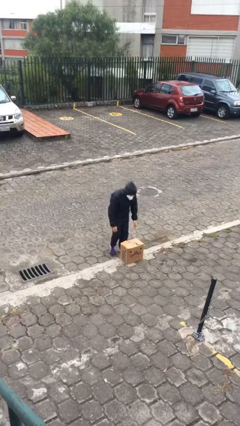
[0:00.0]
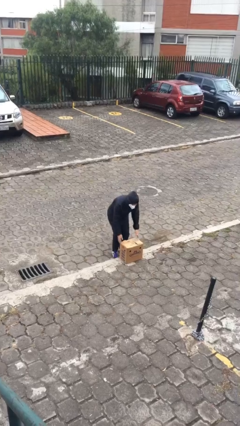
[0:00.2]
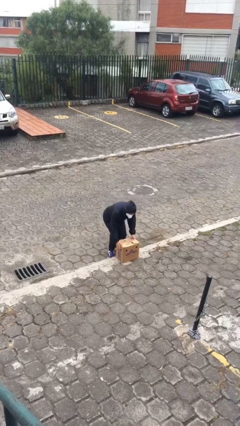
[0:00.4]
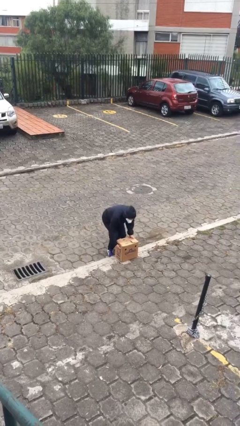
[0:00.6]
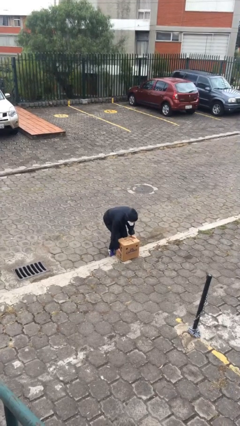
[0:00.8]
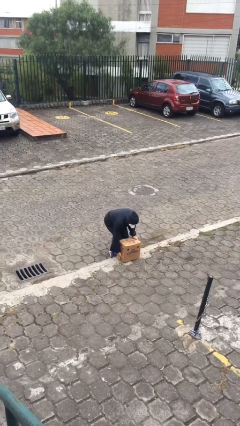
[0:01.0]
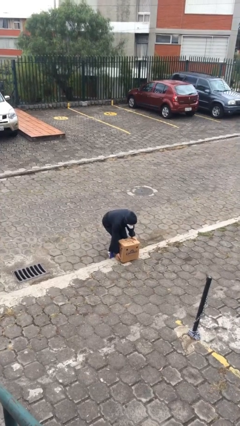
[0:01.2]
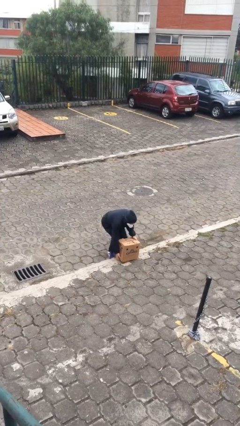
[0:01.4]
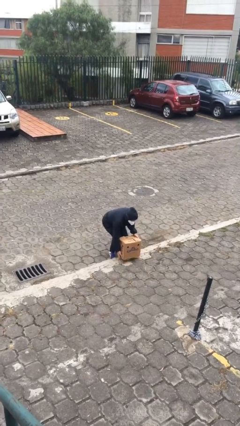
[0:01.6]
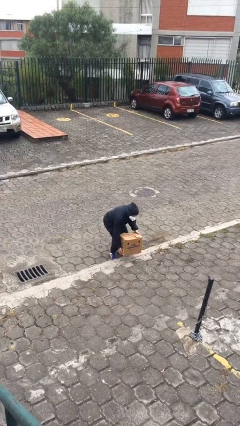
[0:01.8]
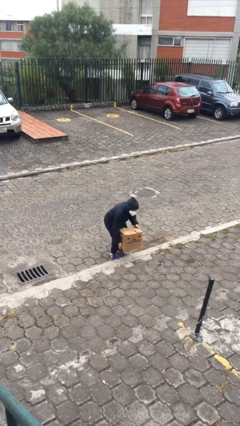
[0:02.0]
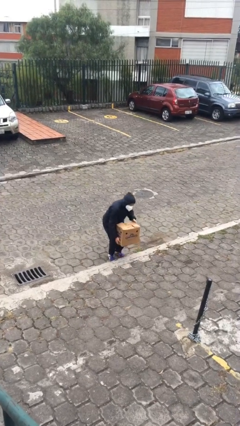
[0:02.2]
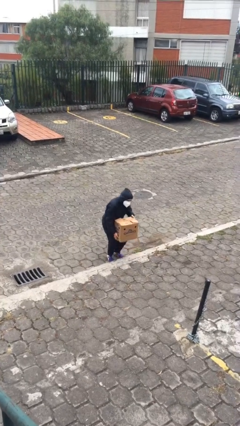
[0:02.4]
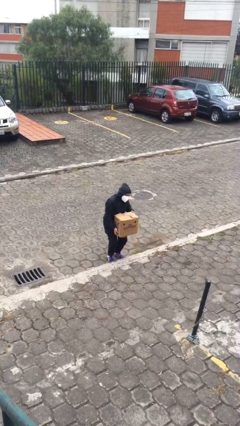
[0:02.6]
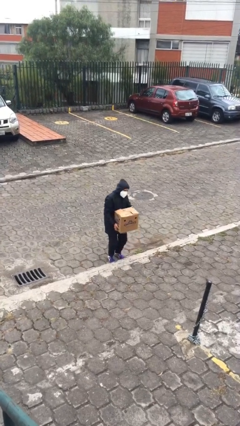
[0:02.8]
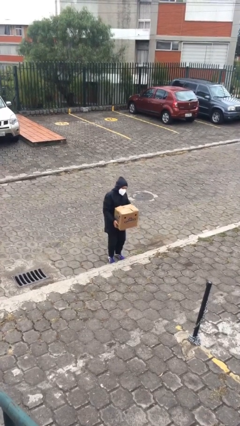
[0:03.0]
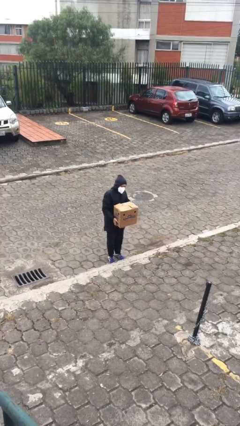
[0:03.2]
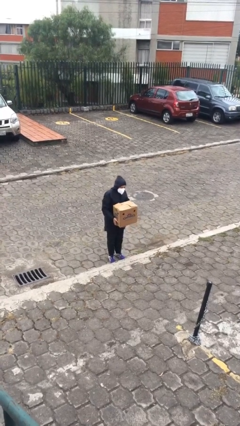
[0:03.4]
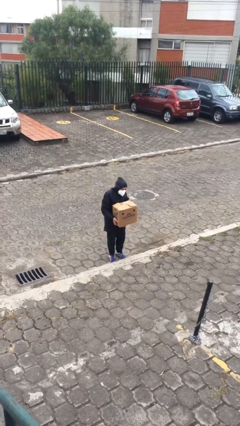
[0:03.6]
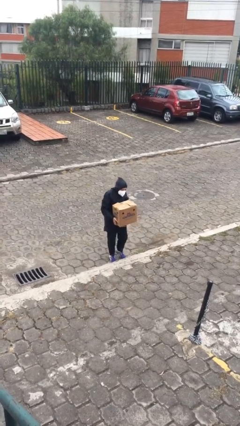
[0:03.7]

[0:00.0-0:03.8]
person picks up object from floor

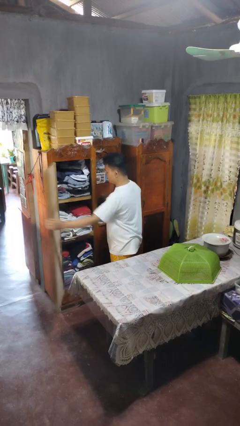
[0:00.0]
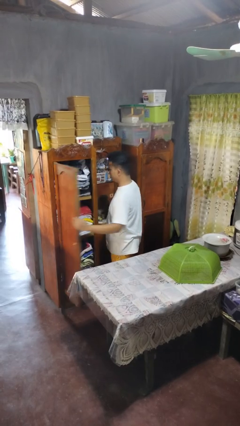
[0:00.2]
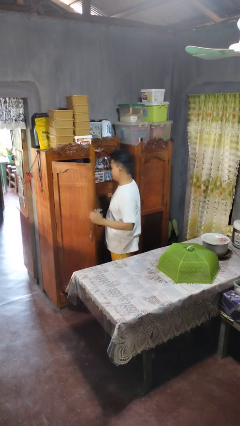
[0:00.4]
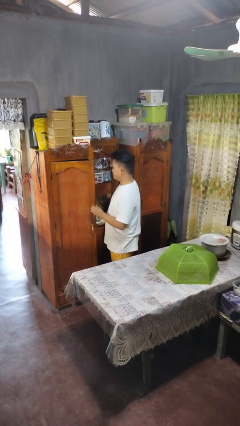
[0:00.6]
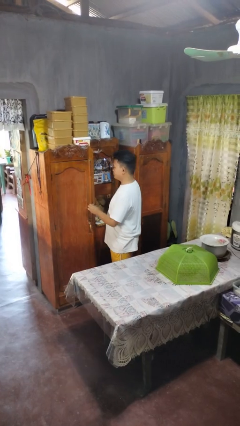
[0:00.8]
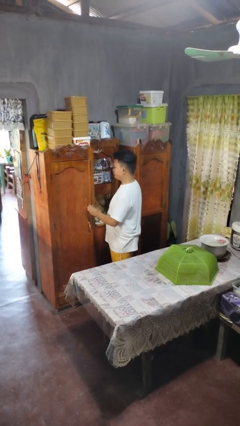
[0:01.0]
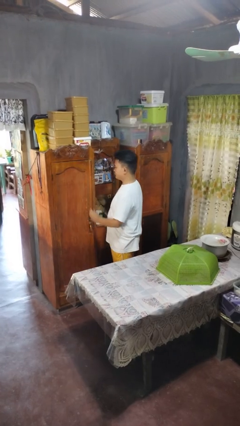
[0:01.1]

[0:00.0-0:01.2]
person closes closet door

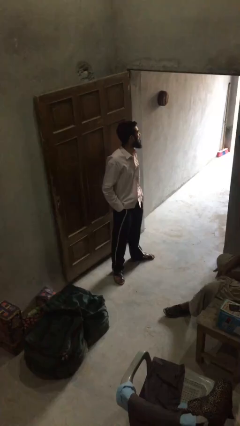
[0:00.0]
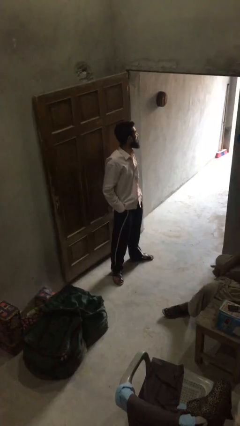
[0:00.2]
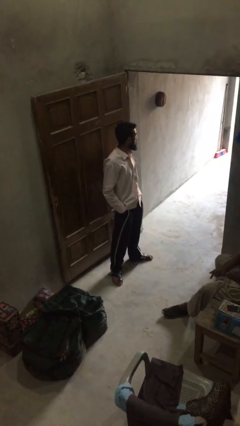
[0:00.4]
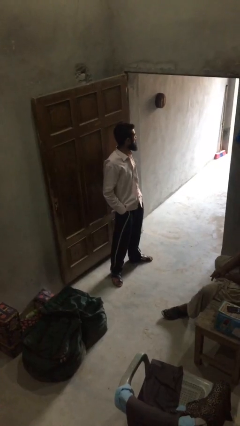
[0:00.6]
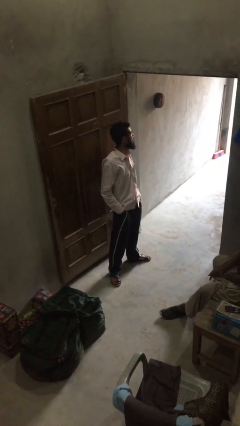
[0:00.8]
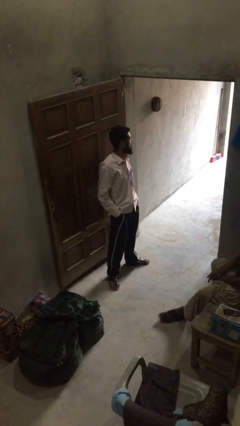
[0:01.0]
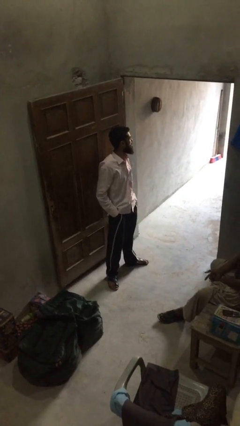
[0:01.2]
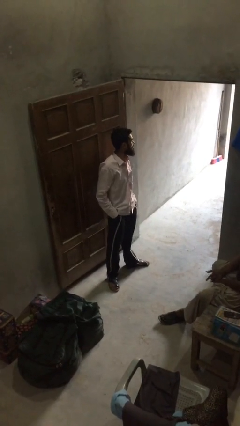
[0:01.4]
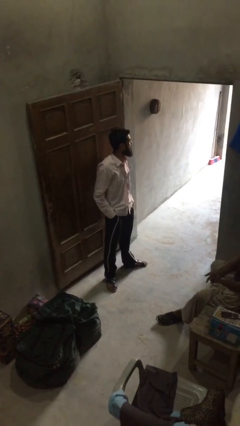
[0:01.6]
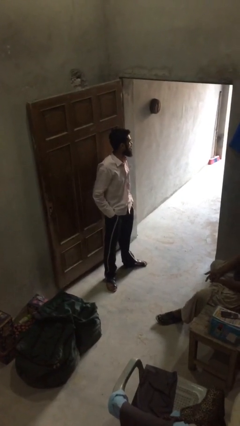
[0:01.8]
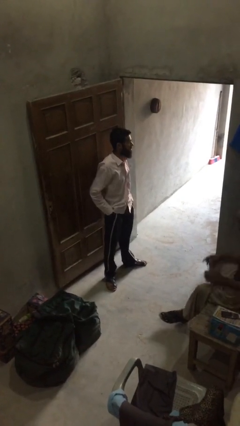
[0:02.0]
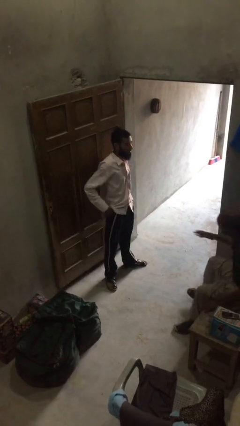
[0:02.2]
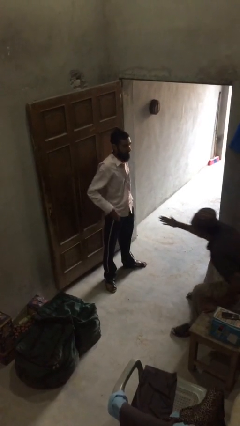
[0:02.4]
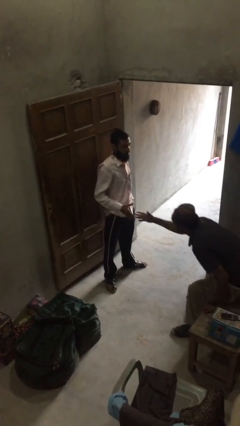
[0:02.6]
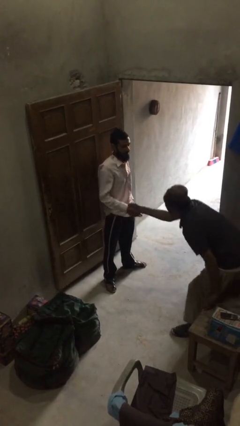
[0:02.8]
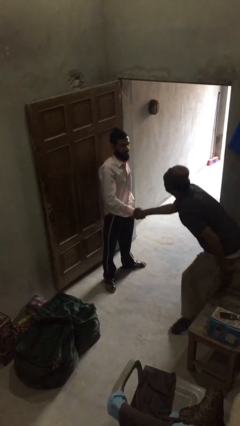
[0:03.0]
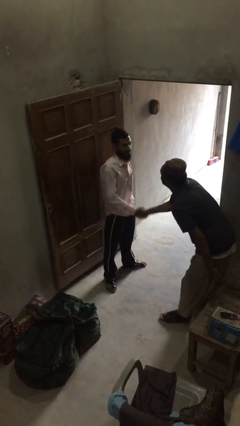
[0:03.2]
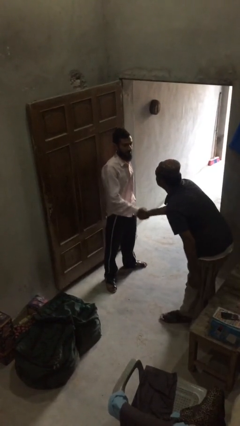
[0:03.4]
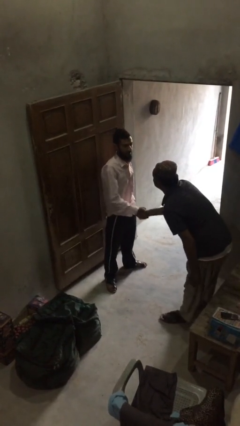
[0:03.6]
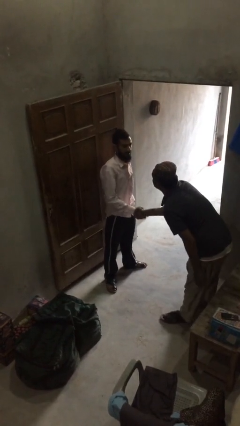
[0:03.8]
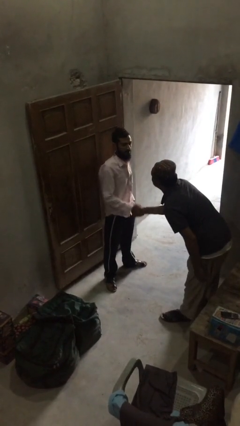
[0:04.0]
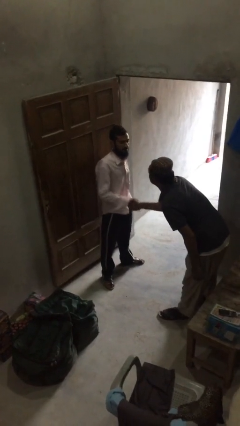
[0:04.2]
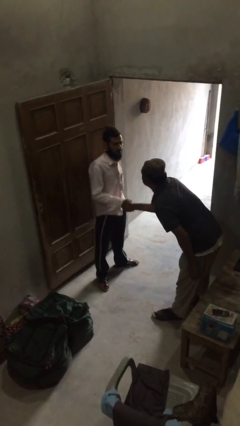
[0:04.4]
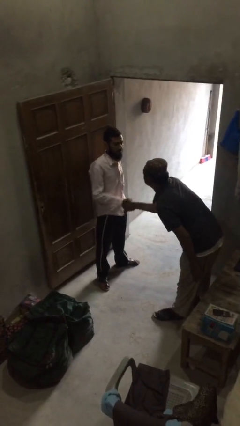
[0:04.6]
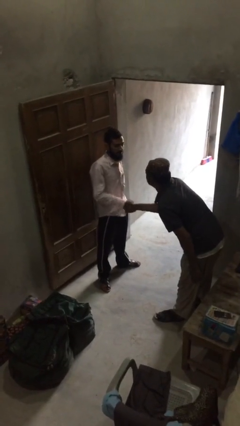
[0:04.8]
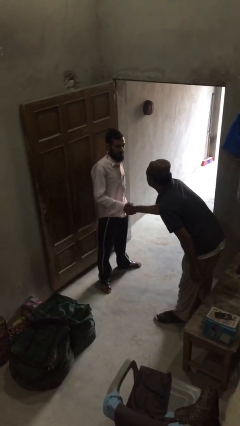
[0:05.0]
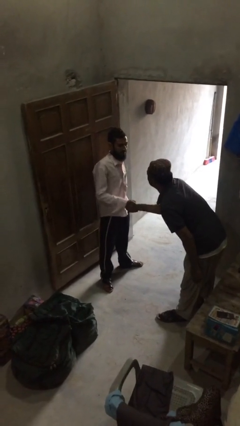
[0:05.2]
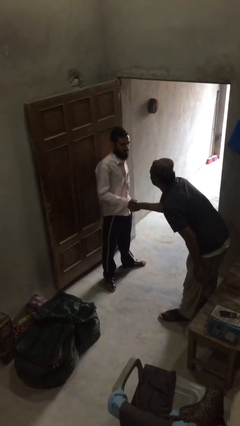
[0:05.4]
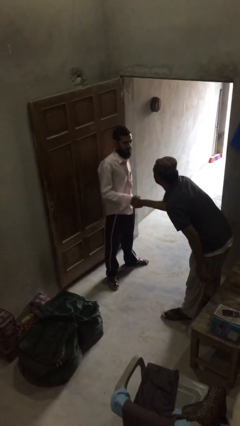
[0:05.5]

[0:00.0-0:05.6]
person shakes hand

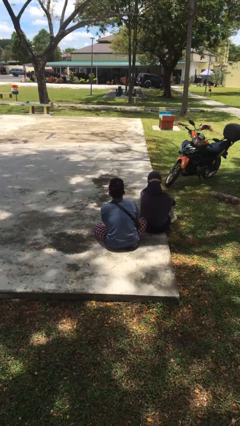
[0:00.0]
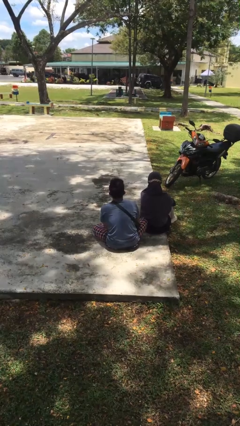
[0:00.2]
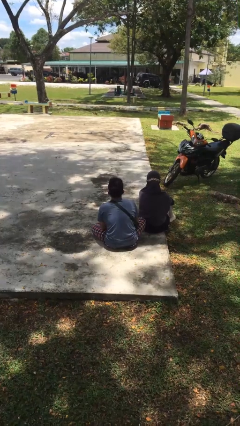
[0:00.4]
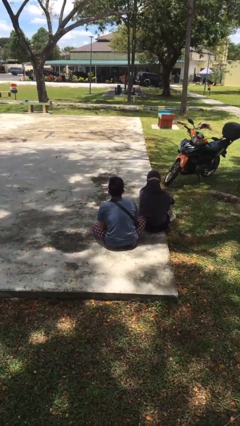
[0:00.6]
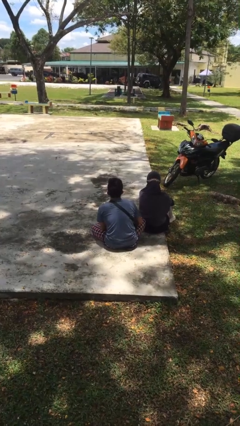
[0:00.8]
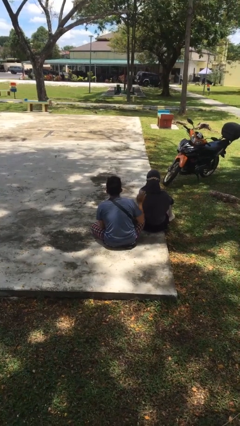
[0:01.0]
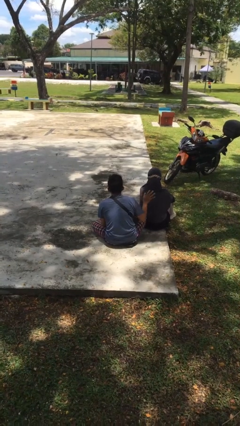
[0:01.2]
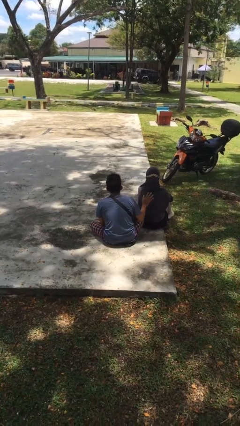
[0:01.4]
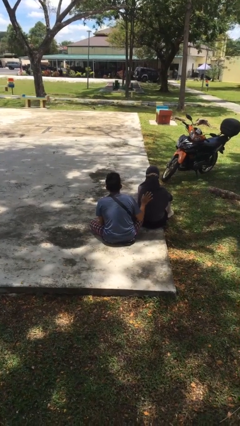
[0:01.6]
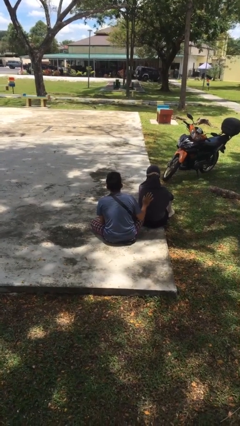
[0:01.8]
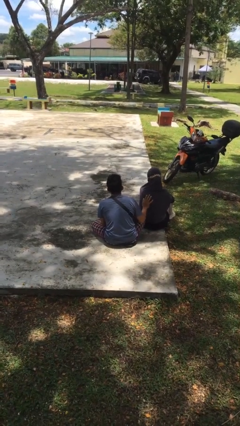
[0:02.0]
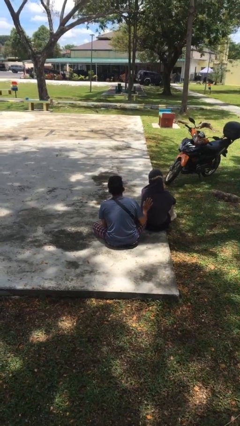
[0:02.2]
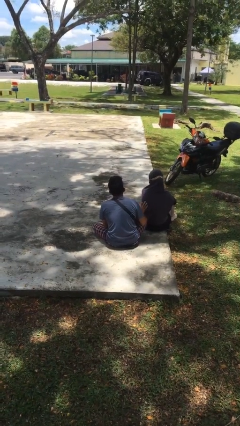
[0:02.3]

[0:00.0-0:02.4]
person touches back of person

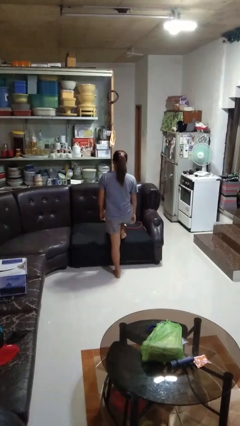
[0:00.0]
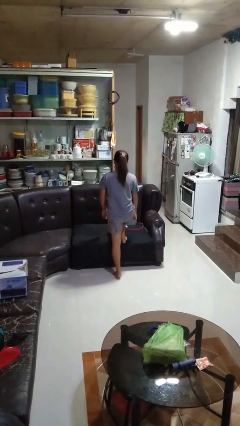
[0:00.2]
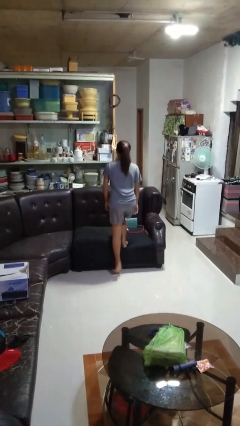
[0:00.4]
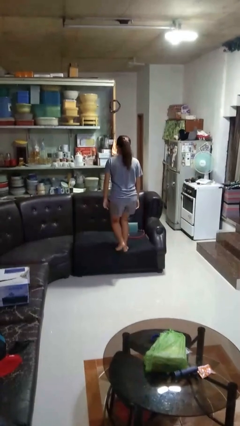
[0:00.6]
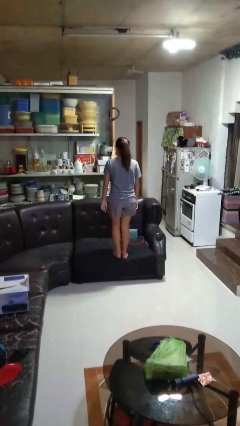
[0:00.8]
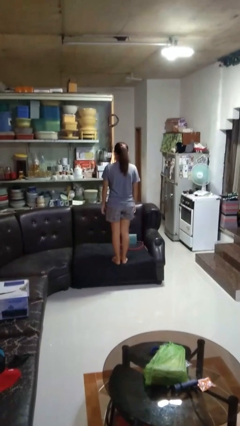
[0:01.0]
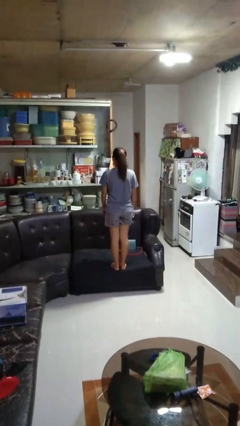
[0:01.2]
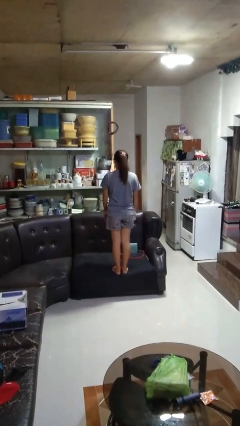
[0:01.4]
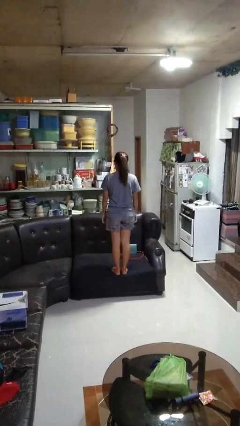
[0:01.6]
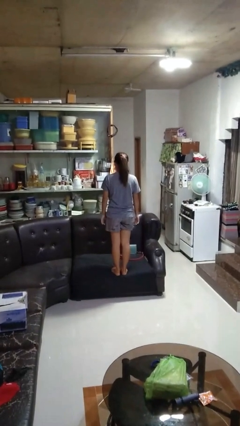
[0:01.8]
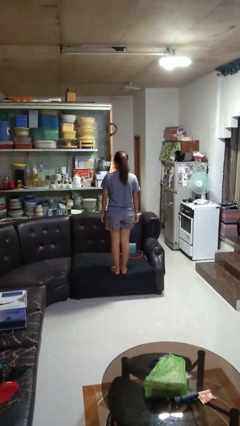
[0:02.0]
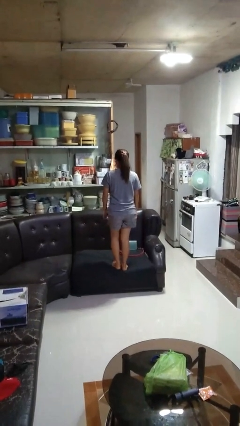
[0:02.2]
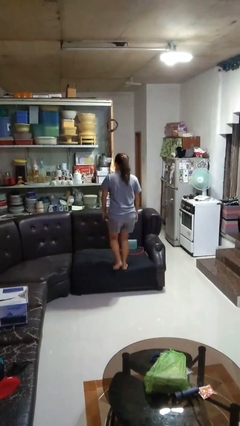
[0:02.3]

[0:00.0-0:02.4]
person climbs on couch

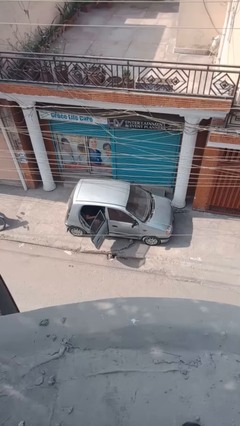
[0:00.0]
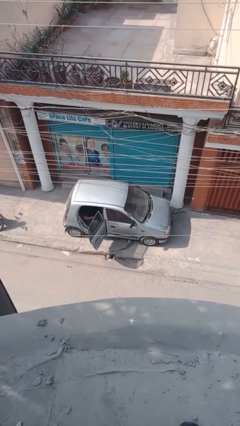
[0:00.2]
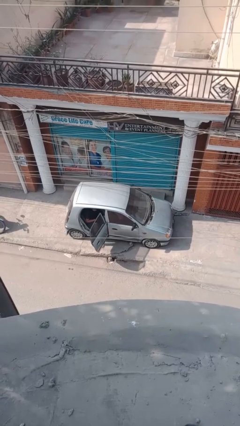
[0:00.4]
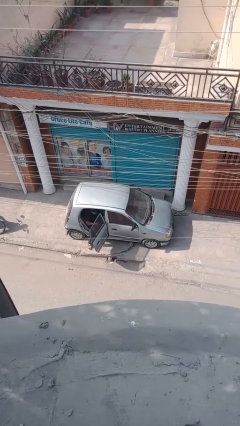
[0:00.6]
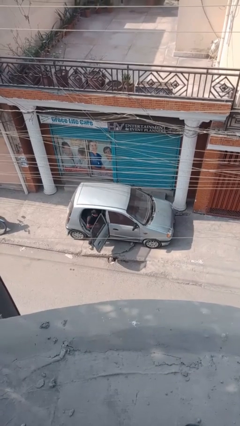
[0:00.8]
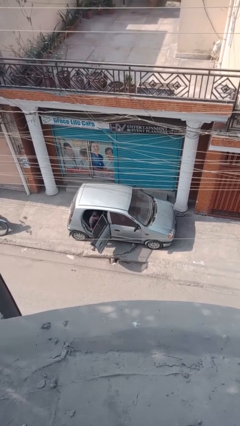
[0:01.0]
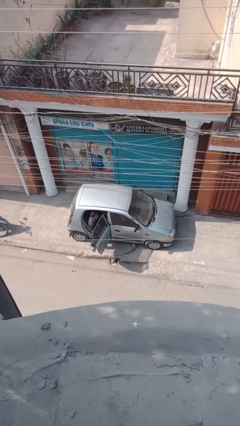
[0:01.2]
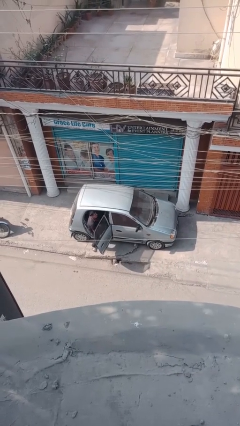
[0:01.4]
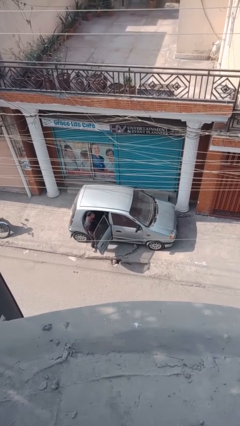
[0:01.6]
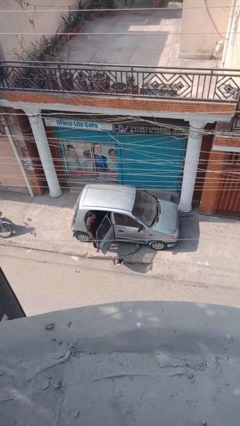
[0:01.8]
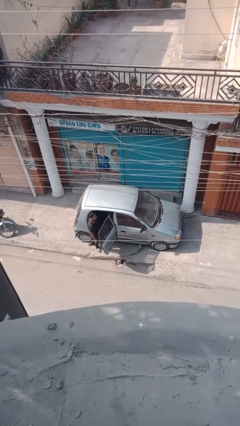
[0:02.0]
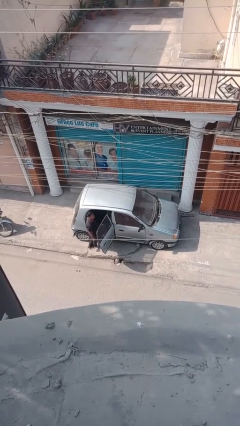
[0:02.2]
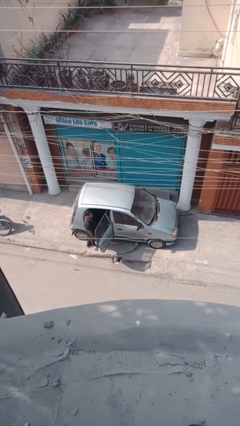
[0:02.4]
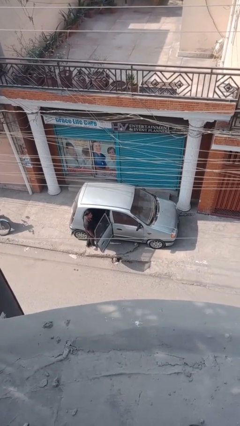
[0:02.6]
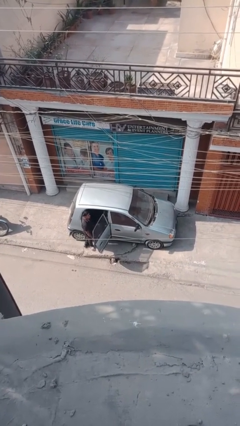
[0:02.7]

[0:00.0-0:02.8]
person exits car
